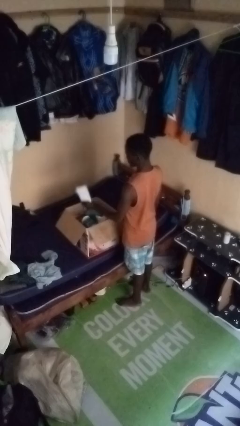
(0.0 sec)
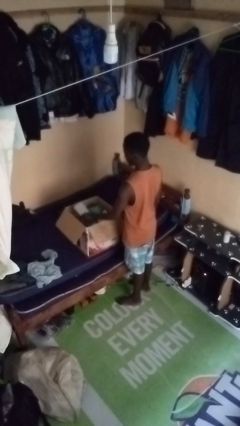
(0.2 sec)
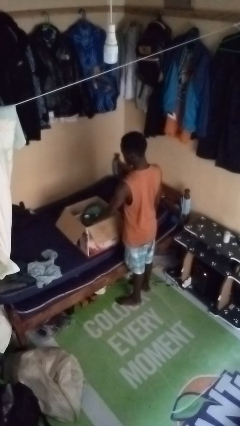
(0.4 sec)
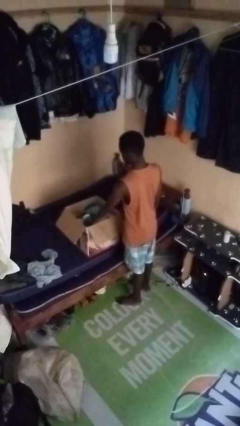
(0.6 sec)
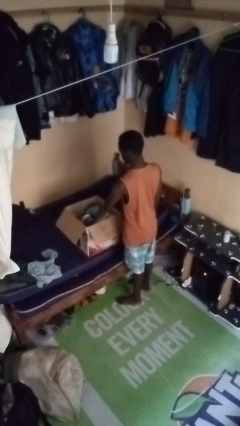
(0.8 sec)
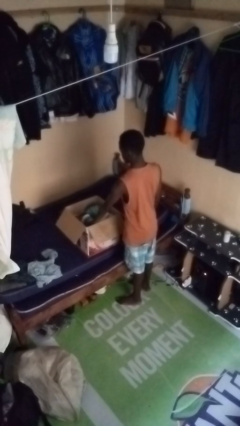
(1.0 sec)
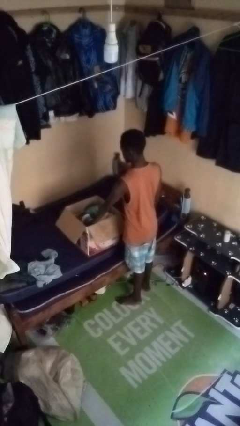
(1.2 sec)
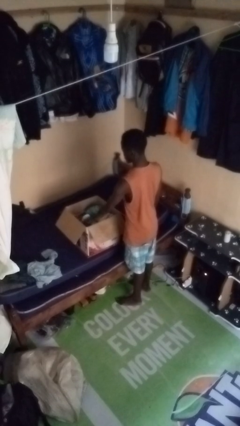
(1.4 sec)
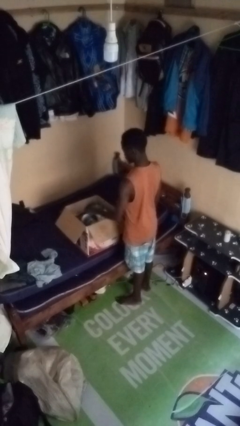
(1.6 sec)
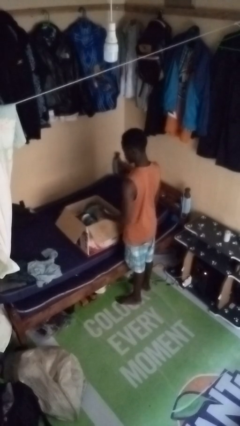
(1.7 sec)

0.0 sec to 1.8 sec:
person puts object into box

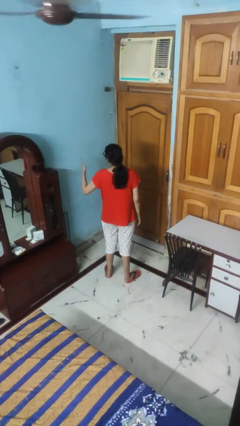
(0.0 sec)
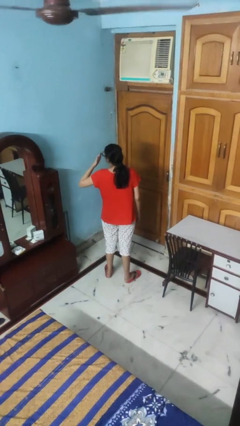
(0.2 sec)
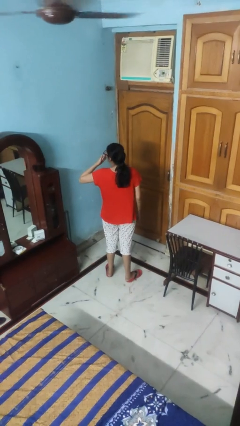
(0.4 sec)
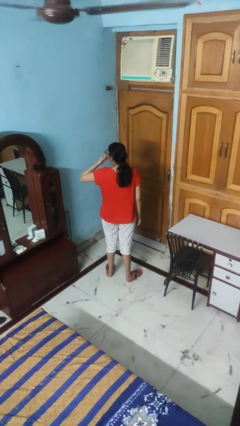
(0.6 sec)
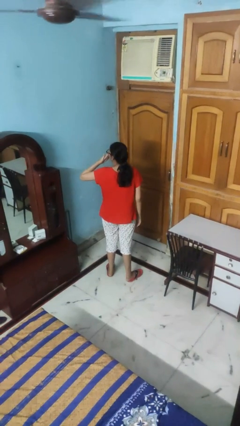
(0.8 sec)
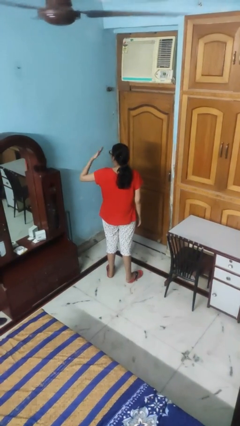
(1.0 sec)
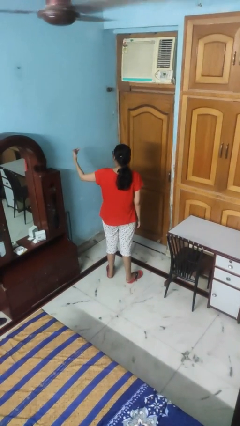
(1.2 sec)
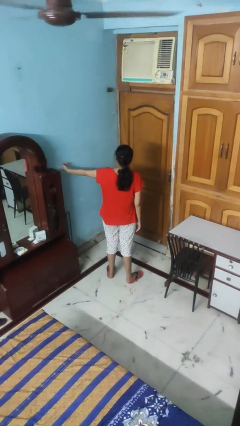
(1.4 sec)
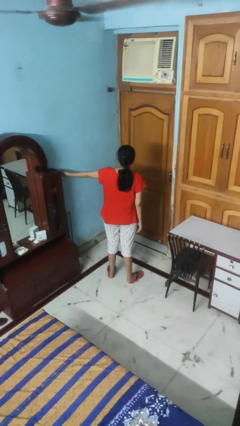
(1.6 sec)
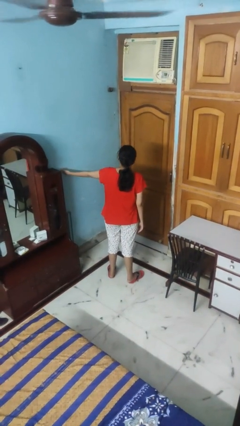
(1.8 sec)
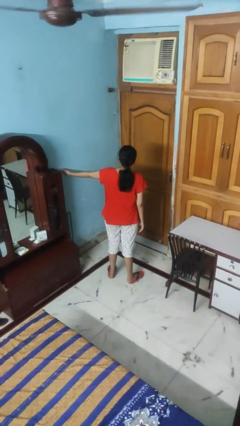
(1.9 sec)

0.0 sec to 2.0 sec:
person gestures blow kiss

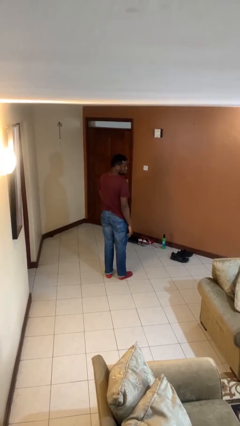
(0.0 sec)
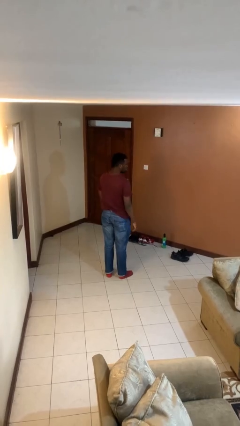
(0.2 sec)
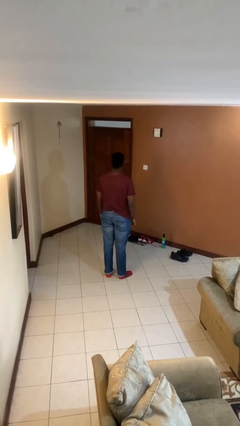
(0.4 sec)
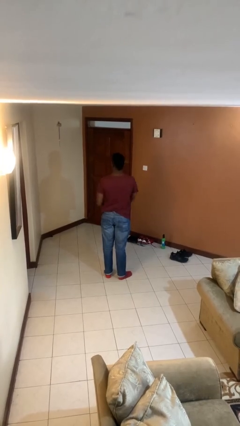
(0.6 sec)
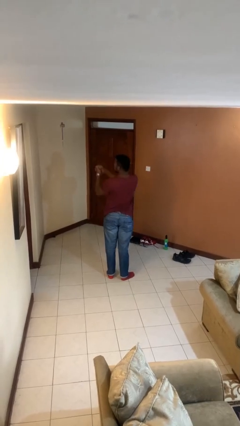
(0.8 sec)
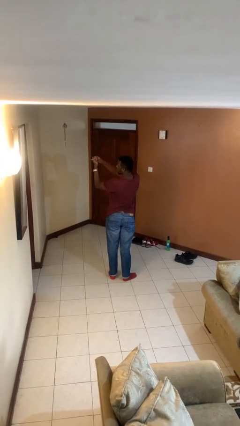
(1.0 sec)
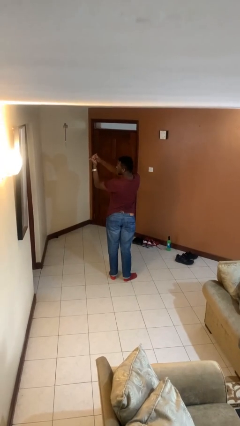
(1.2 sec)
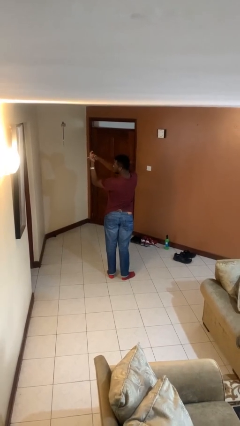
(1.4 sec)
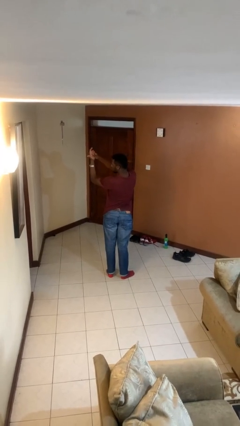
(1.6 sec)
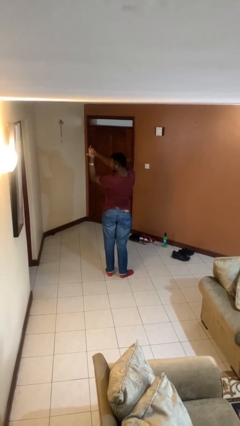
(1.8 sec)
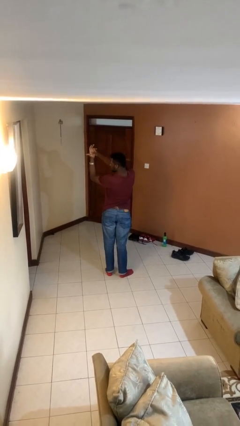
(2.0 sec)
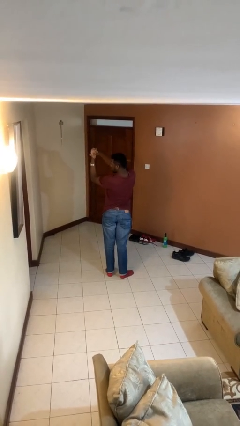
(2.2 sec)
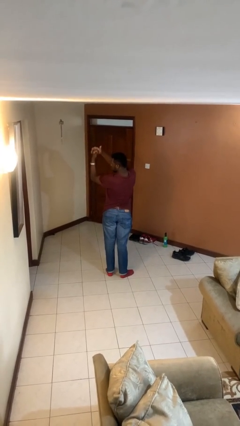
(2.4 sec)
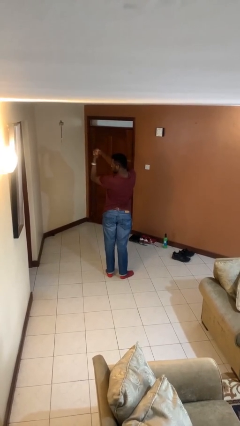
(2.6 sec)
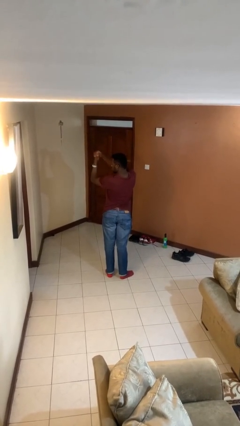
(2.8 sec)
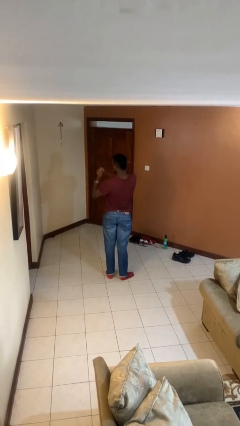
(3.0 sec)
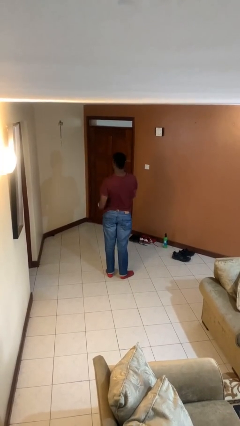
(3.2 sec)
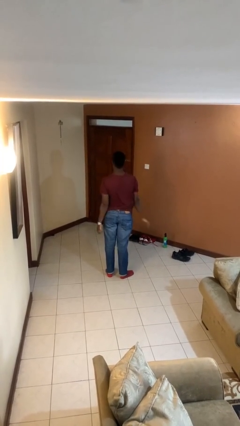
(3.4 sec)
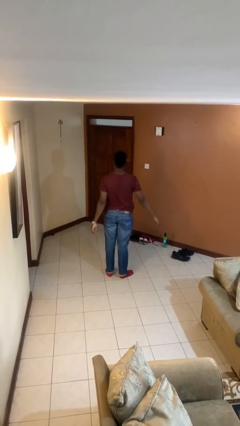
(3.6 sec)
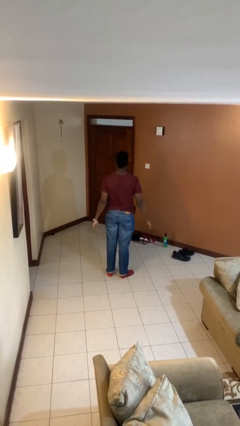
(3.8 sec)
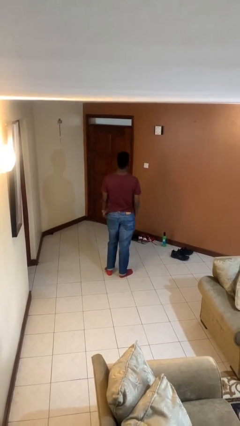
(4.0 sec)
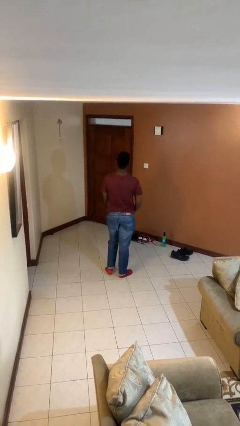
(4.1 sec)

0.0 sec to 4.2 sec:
person cracks knuckles

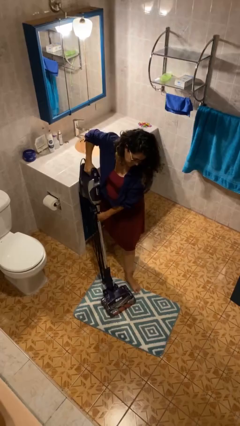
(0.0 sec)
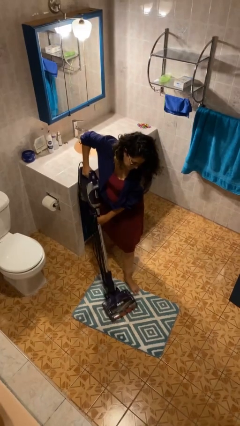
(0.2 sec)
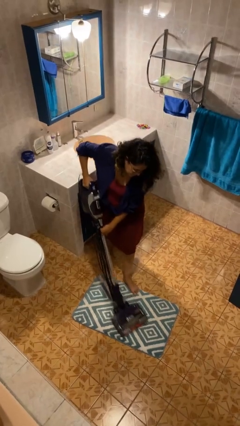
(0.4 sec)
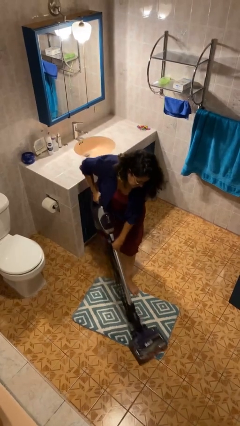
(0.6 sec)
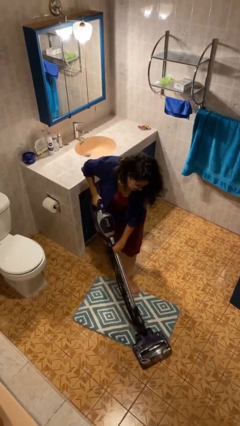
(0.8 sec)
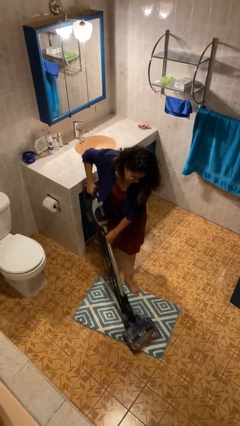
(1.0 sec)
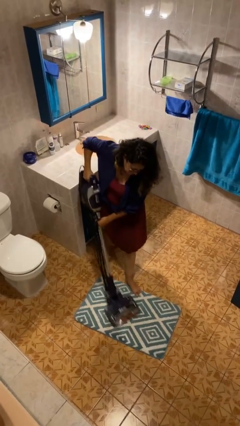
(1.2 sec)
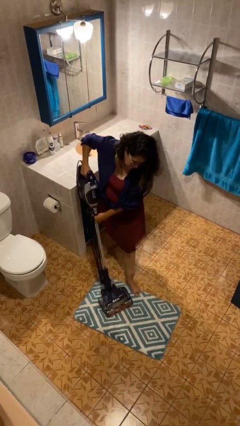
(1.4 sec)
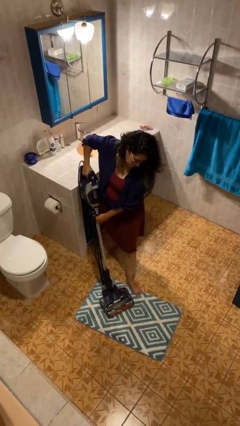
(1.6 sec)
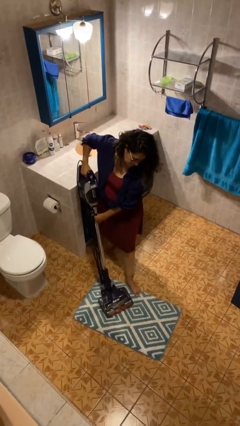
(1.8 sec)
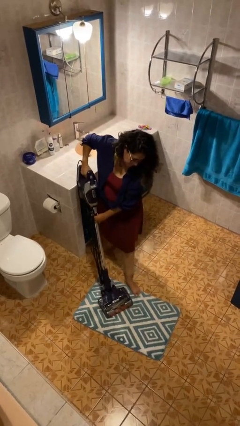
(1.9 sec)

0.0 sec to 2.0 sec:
person vacuums carpet

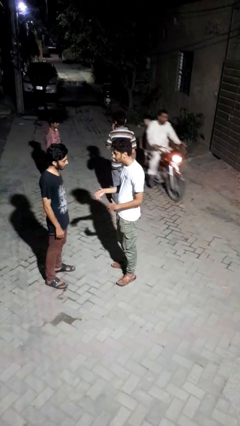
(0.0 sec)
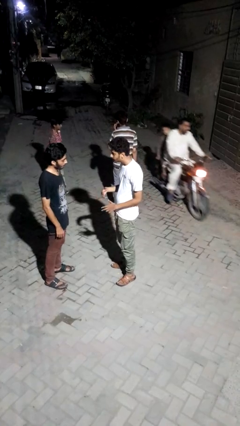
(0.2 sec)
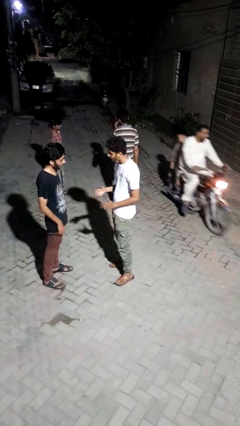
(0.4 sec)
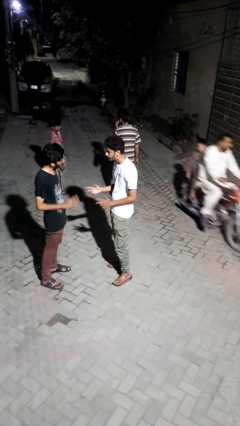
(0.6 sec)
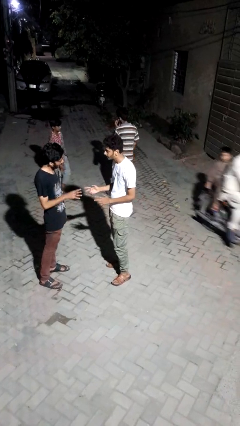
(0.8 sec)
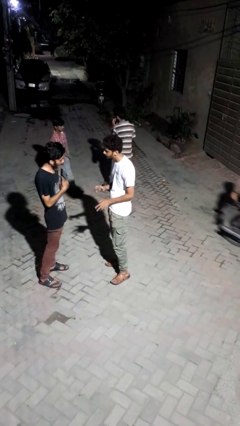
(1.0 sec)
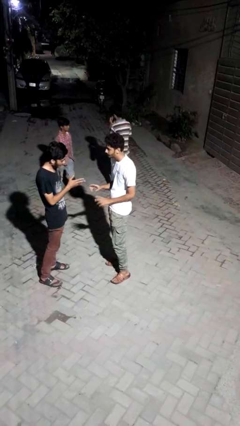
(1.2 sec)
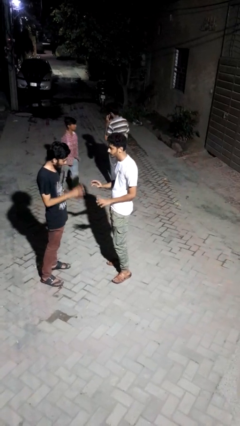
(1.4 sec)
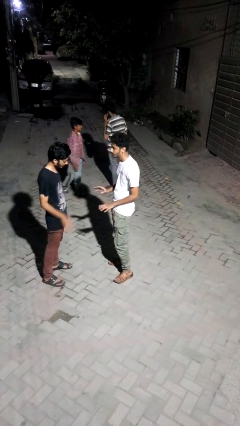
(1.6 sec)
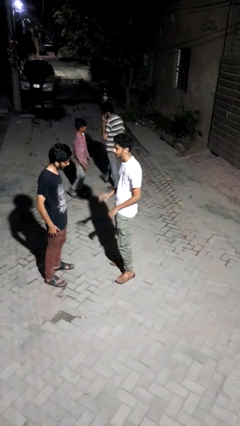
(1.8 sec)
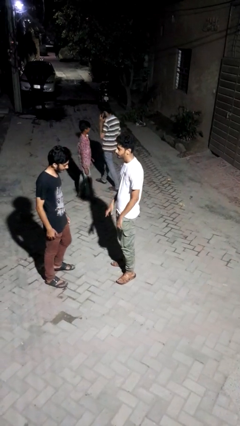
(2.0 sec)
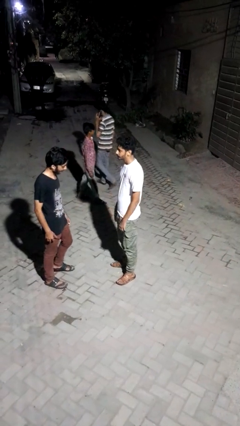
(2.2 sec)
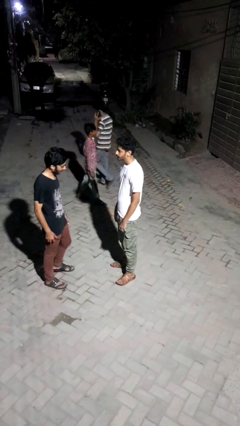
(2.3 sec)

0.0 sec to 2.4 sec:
person talks to person

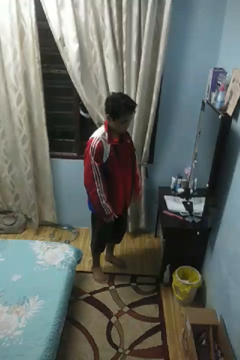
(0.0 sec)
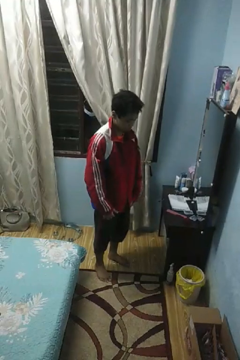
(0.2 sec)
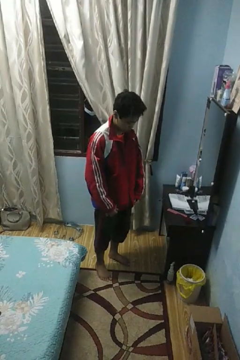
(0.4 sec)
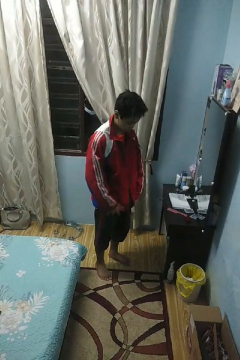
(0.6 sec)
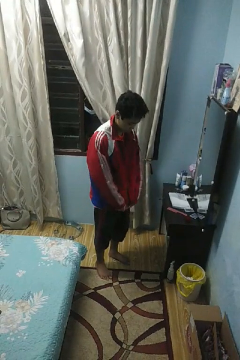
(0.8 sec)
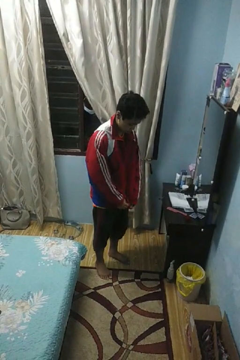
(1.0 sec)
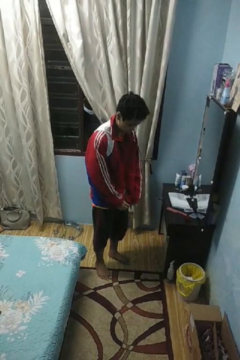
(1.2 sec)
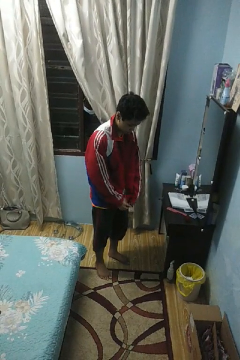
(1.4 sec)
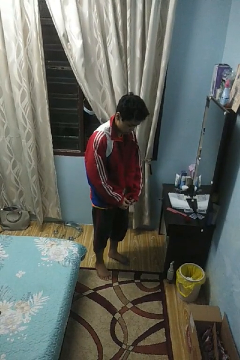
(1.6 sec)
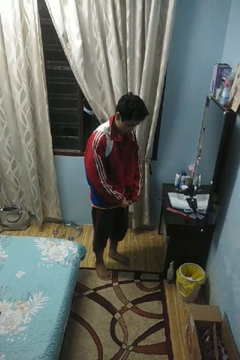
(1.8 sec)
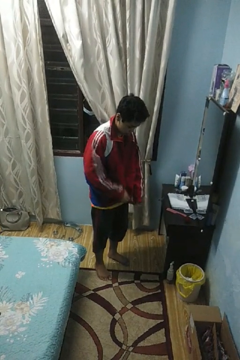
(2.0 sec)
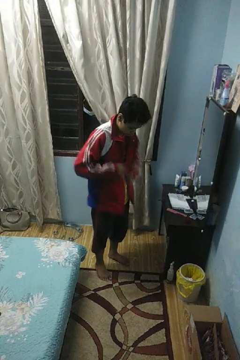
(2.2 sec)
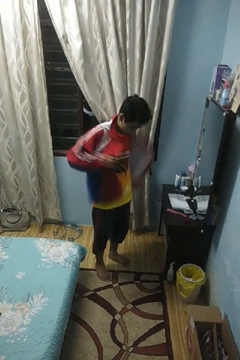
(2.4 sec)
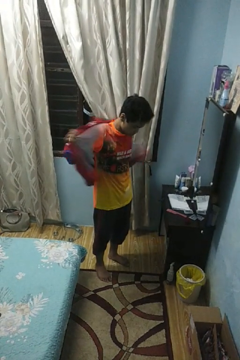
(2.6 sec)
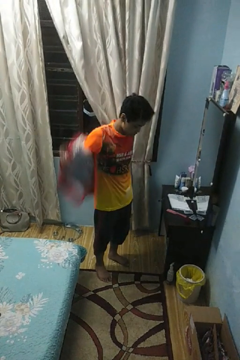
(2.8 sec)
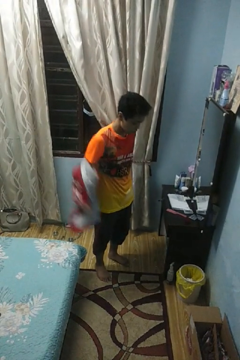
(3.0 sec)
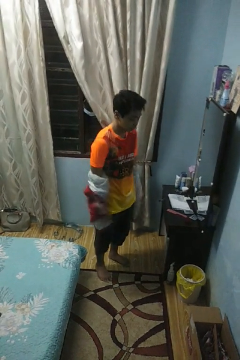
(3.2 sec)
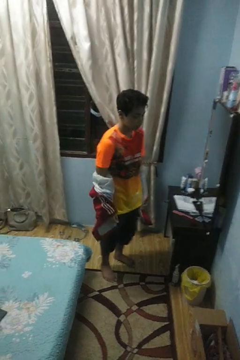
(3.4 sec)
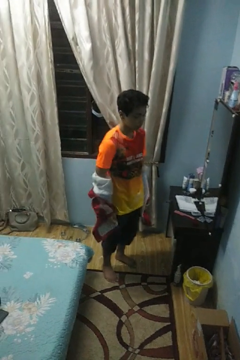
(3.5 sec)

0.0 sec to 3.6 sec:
person takes off jacket

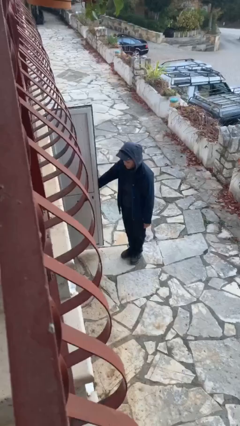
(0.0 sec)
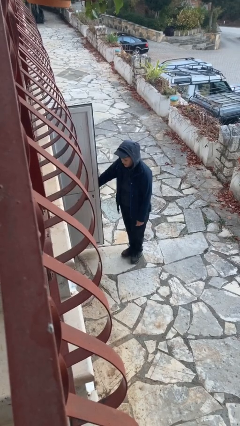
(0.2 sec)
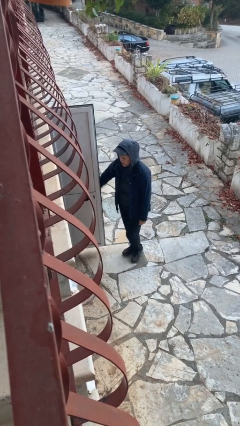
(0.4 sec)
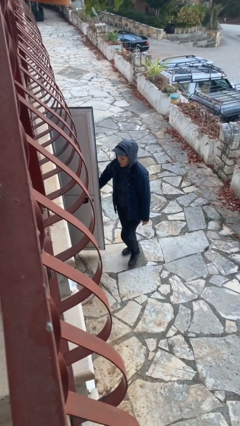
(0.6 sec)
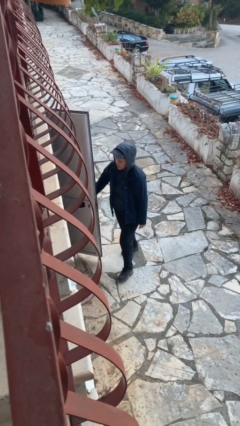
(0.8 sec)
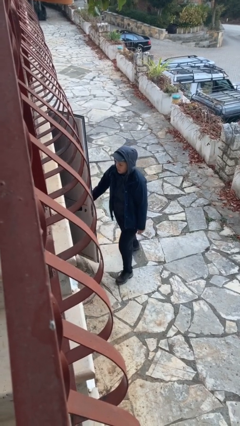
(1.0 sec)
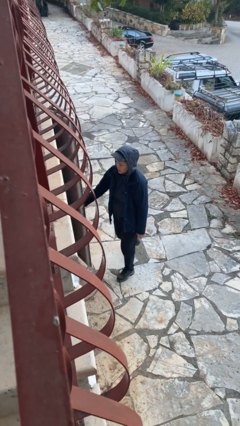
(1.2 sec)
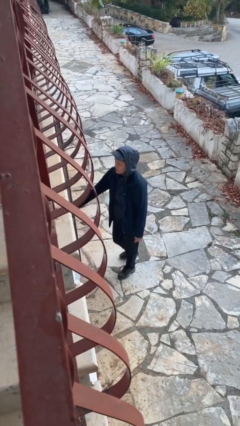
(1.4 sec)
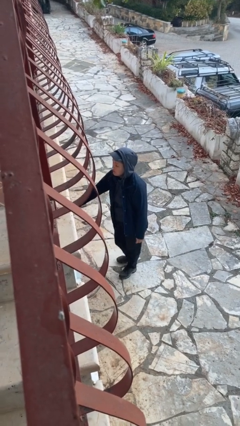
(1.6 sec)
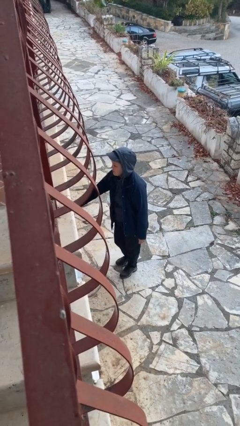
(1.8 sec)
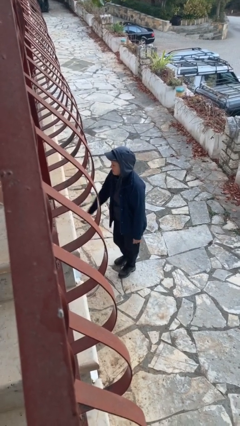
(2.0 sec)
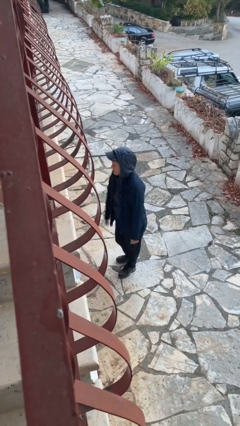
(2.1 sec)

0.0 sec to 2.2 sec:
person closes facility door
